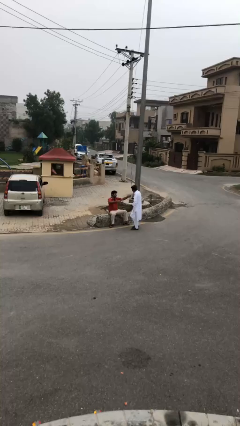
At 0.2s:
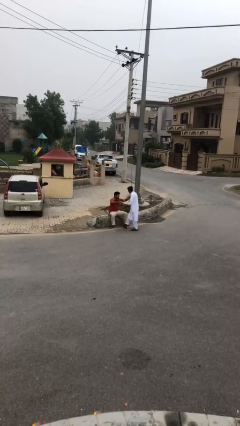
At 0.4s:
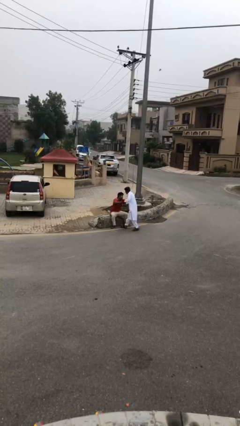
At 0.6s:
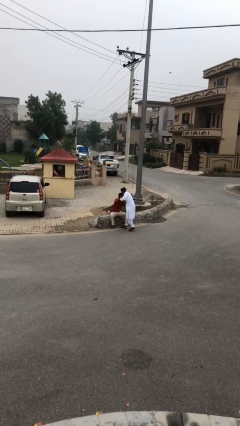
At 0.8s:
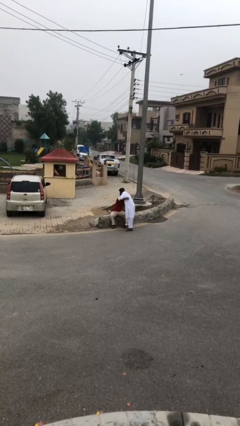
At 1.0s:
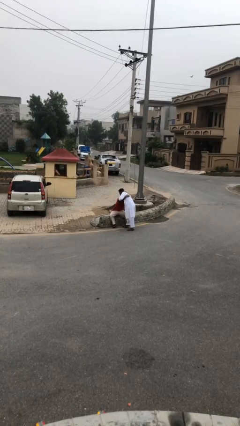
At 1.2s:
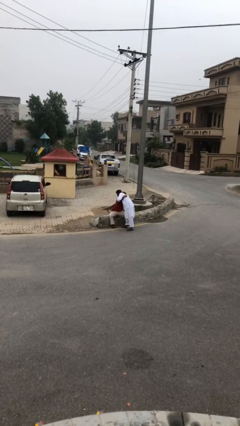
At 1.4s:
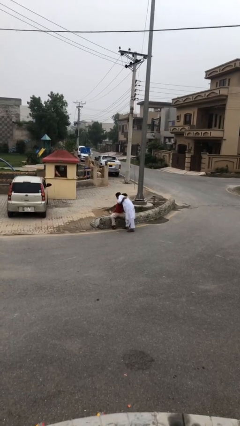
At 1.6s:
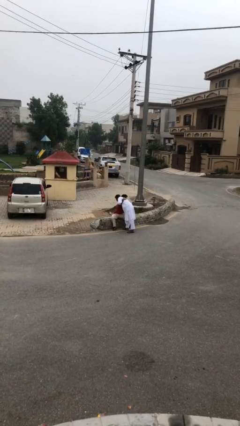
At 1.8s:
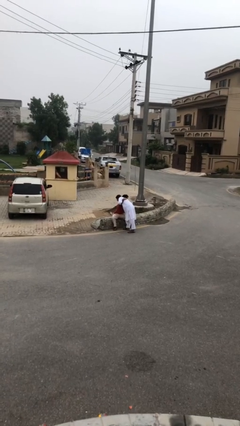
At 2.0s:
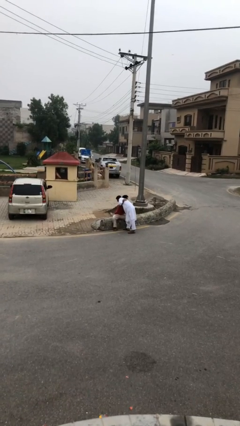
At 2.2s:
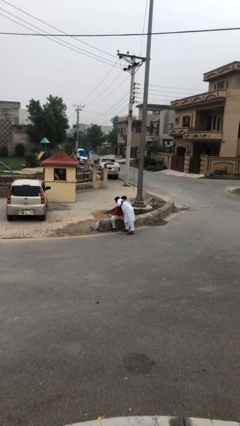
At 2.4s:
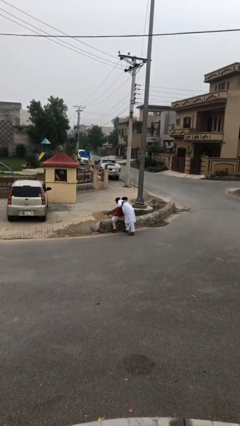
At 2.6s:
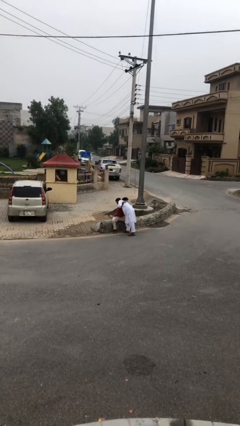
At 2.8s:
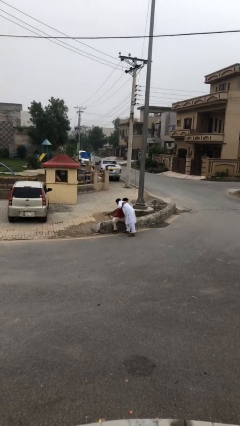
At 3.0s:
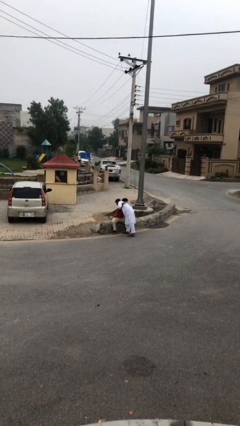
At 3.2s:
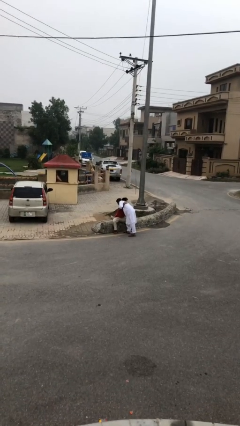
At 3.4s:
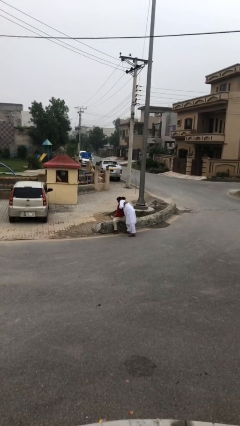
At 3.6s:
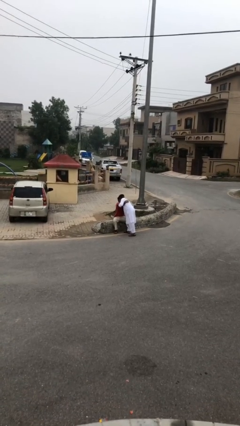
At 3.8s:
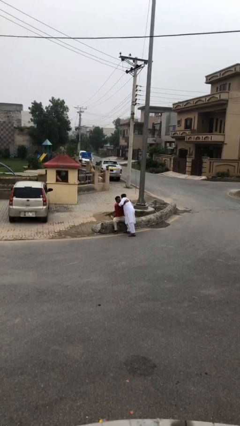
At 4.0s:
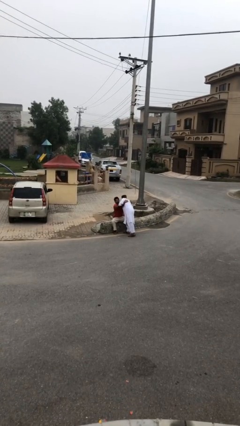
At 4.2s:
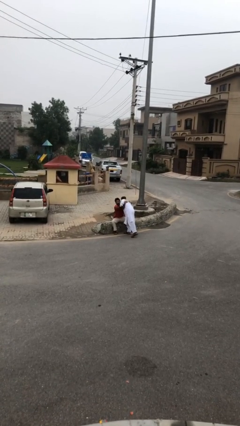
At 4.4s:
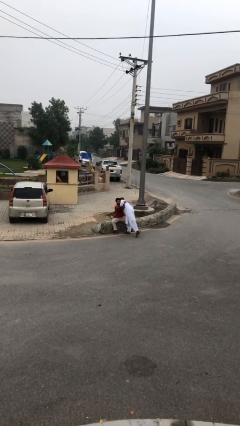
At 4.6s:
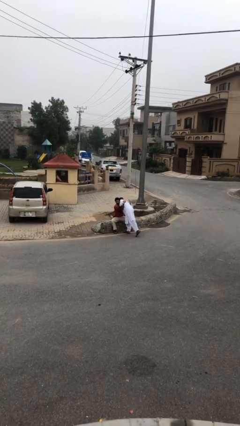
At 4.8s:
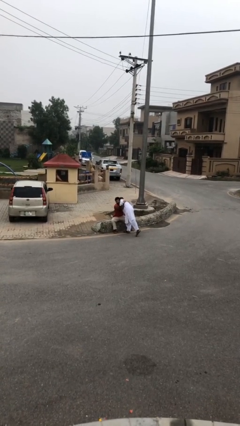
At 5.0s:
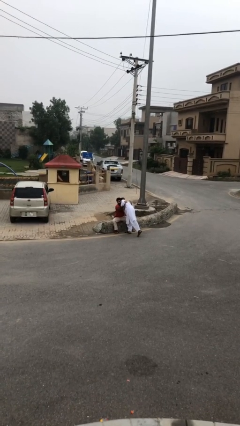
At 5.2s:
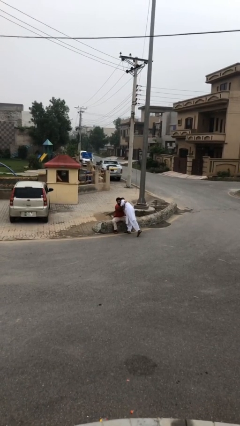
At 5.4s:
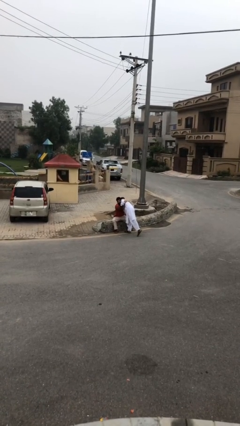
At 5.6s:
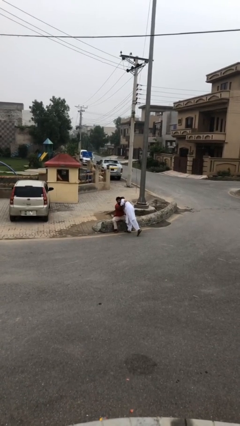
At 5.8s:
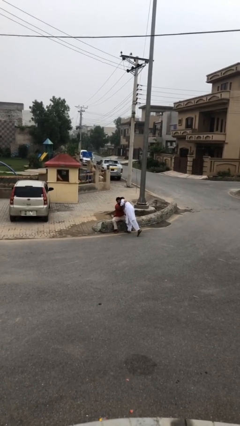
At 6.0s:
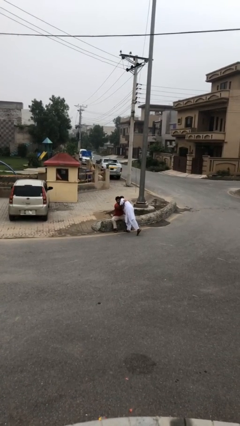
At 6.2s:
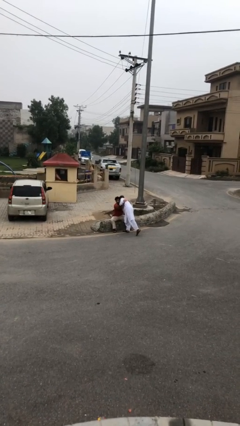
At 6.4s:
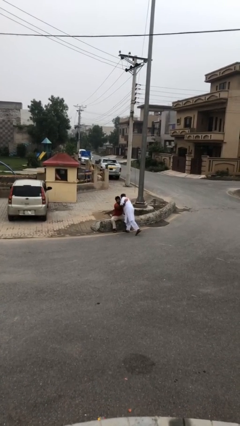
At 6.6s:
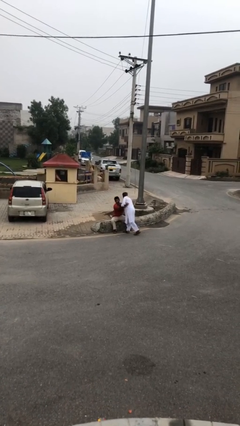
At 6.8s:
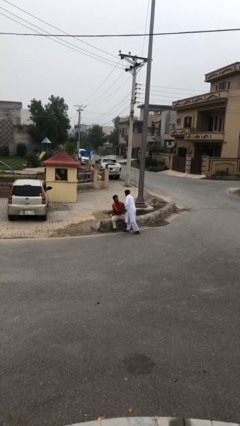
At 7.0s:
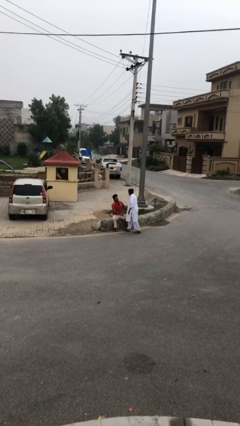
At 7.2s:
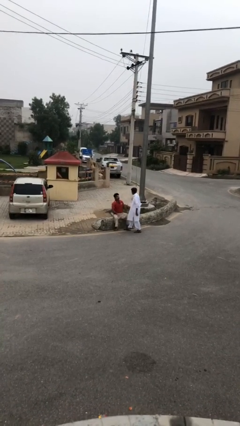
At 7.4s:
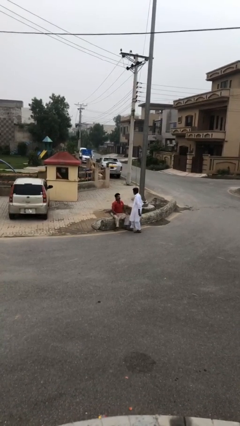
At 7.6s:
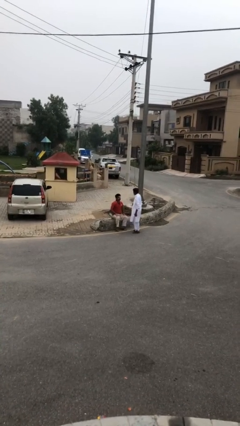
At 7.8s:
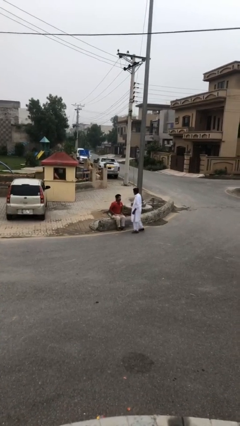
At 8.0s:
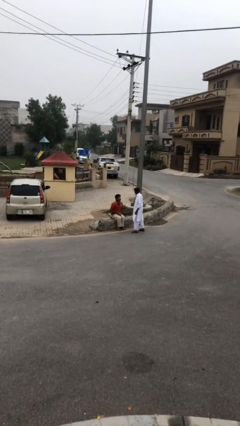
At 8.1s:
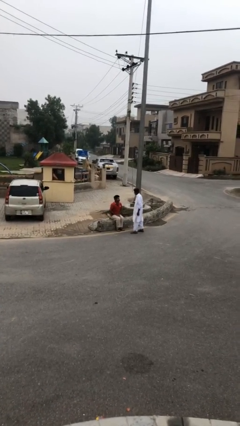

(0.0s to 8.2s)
person embraces person

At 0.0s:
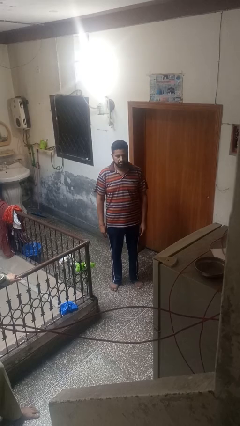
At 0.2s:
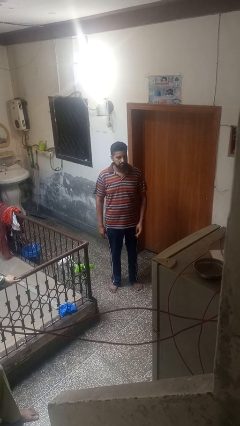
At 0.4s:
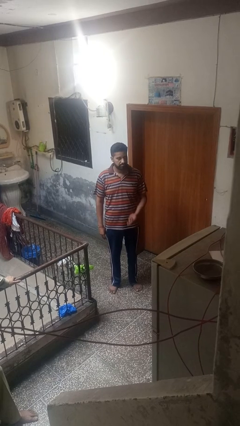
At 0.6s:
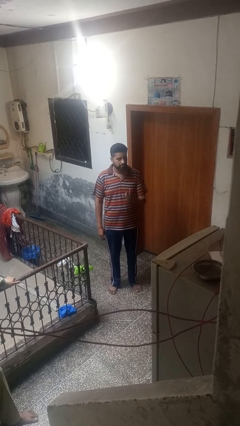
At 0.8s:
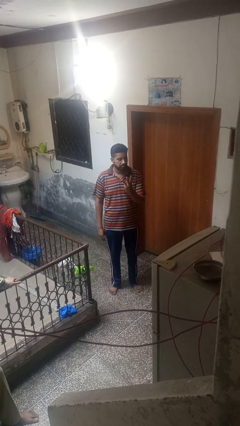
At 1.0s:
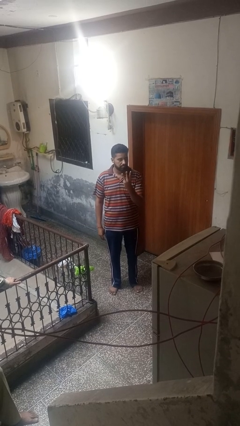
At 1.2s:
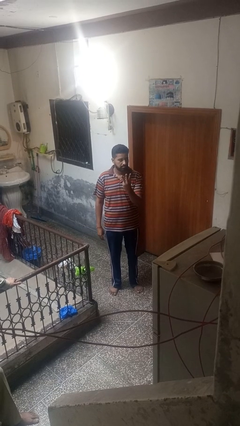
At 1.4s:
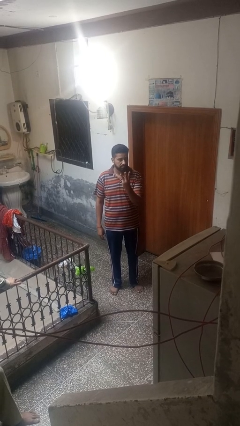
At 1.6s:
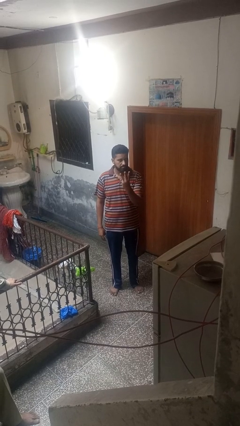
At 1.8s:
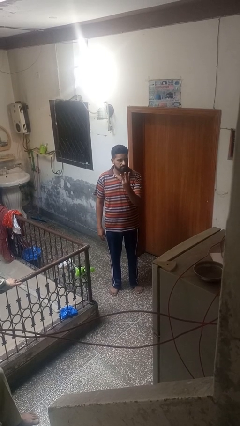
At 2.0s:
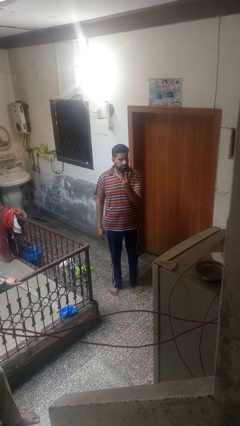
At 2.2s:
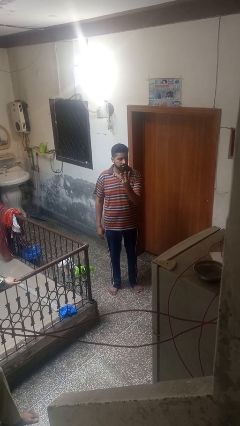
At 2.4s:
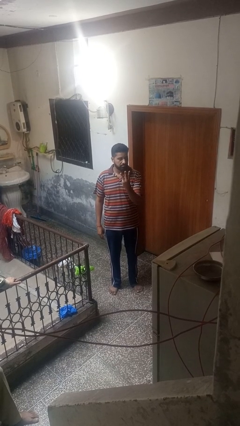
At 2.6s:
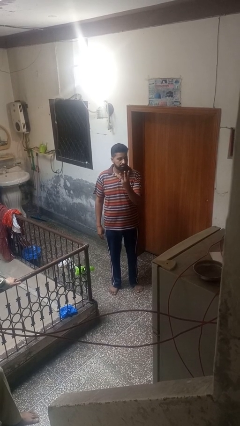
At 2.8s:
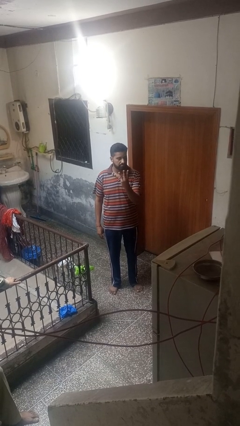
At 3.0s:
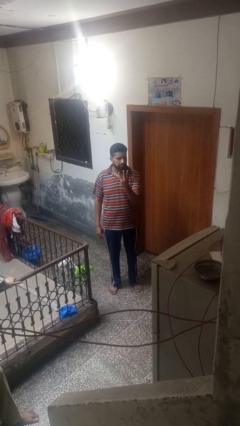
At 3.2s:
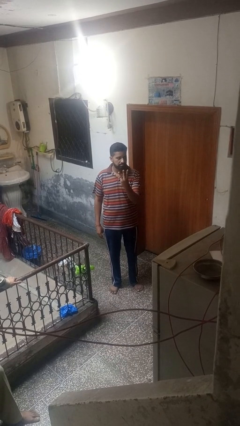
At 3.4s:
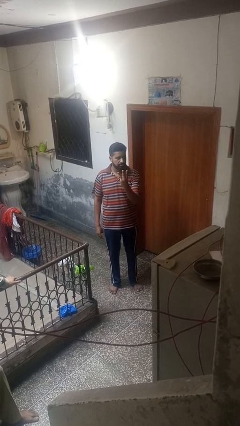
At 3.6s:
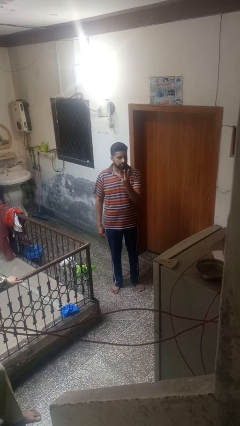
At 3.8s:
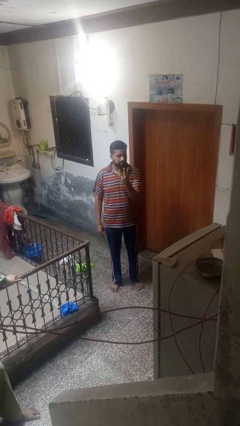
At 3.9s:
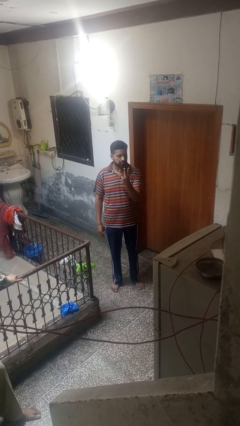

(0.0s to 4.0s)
person gestures number three

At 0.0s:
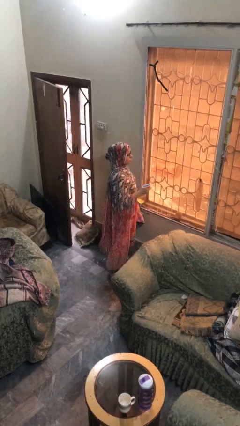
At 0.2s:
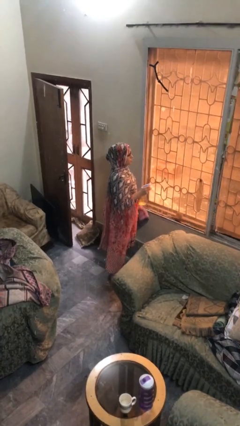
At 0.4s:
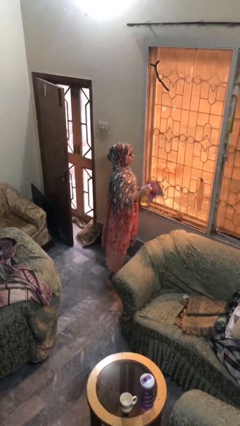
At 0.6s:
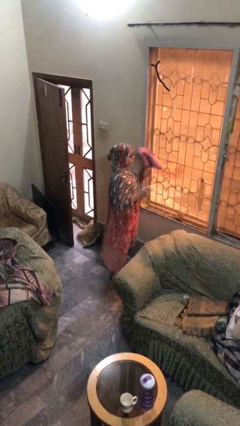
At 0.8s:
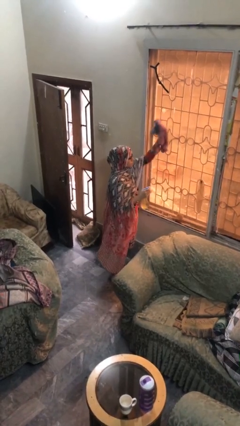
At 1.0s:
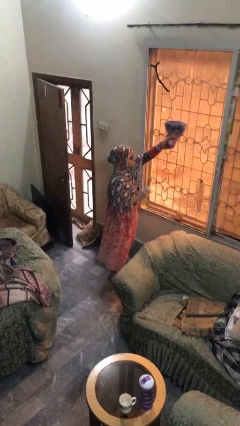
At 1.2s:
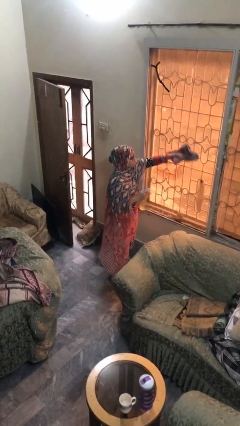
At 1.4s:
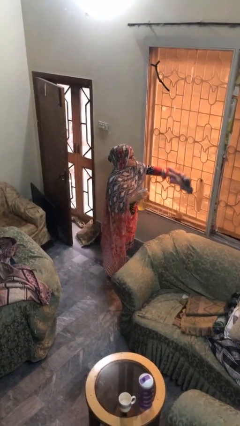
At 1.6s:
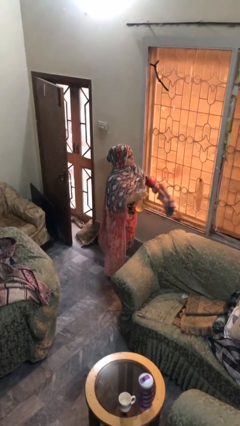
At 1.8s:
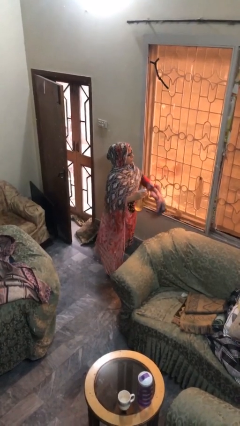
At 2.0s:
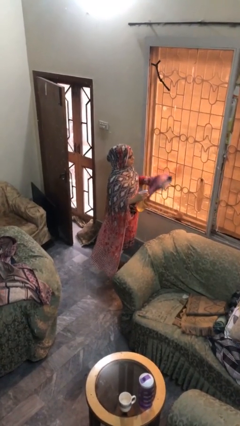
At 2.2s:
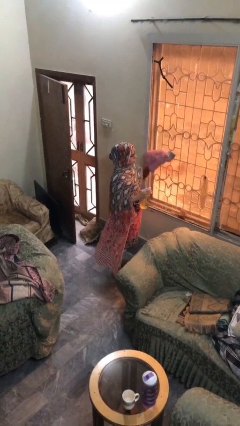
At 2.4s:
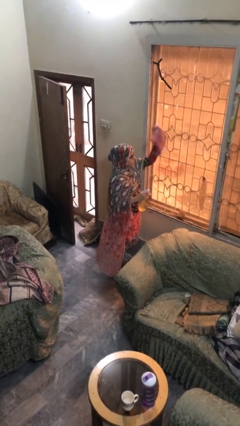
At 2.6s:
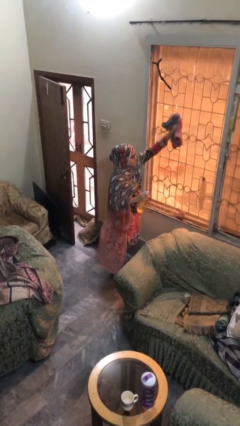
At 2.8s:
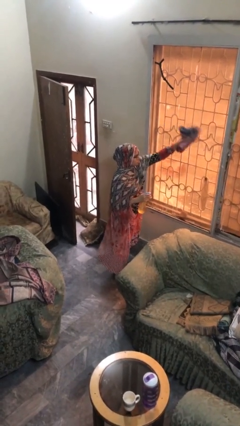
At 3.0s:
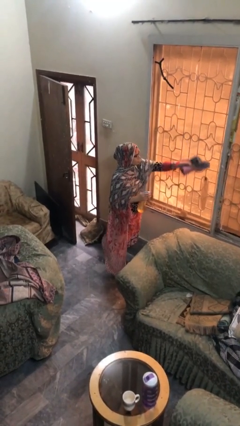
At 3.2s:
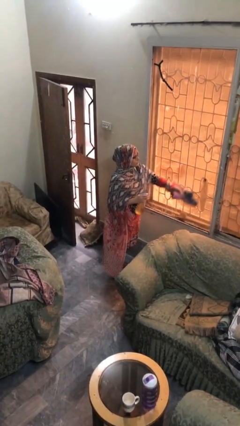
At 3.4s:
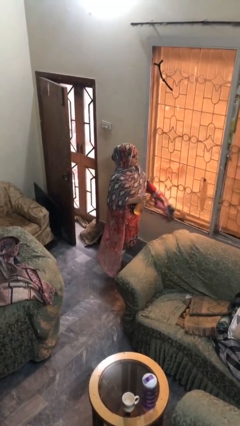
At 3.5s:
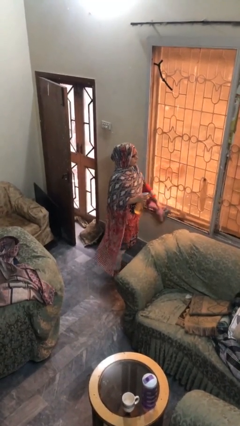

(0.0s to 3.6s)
person washes window

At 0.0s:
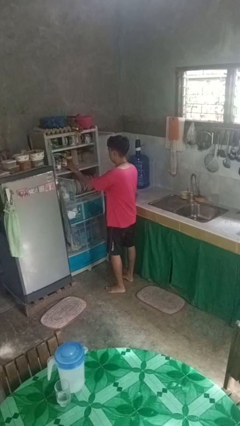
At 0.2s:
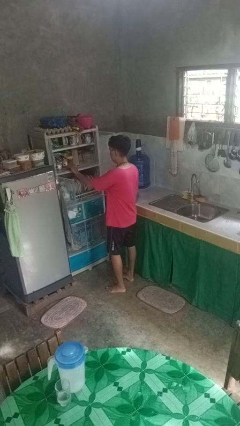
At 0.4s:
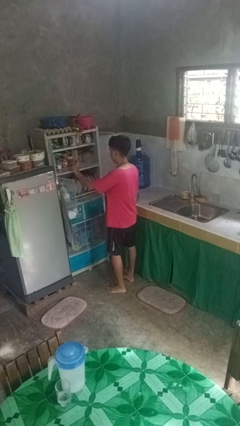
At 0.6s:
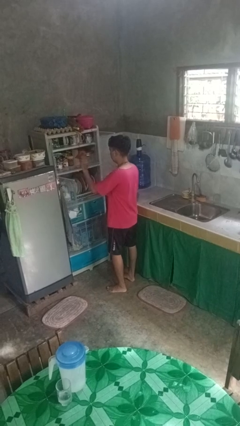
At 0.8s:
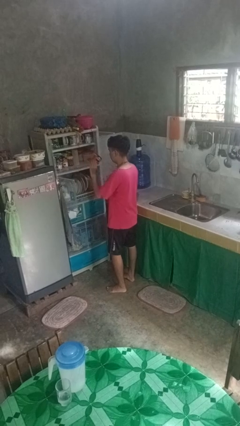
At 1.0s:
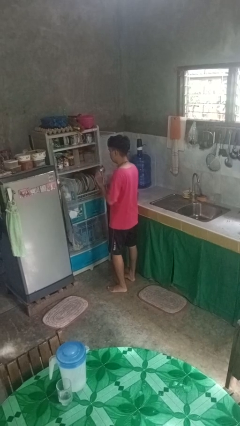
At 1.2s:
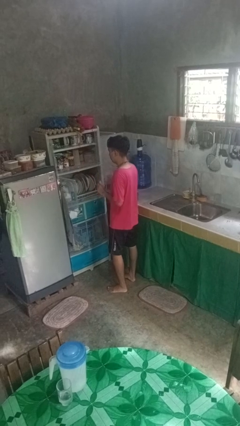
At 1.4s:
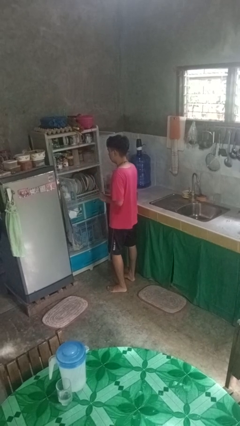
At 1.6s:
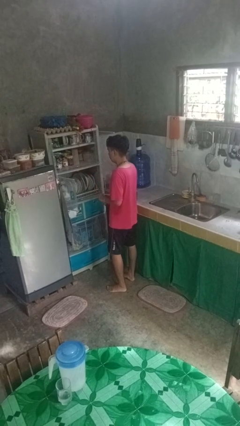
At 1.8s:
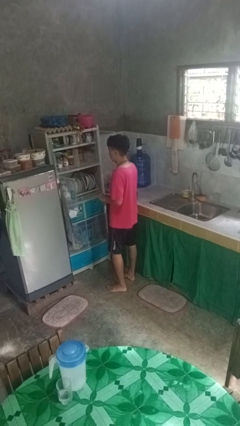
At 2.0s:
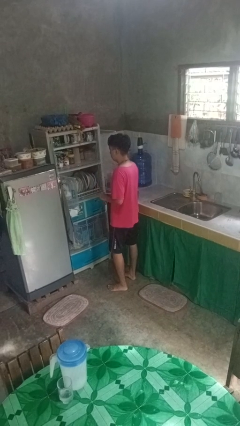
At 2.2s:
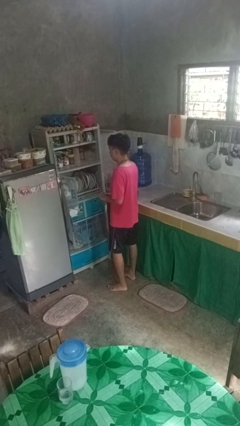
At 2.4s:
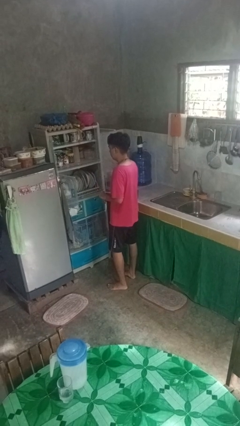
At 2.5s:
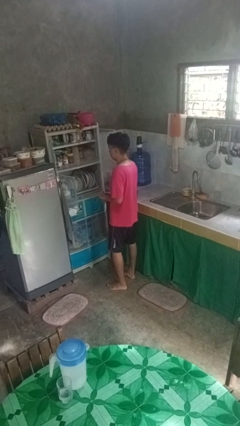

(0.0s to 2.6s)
person takes object from cabinet
